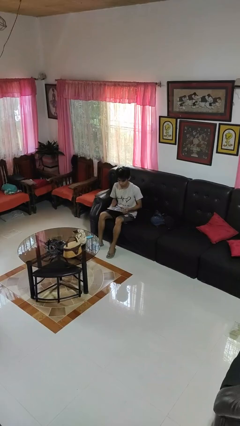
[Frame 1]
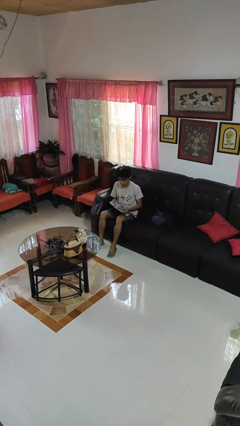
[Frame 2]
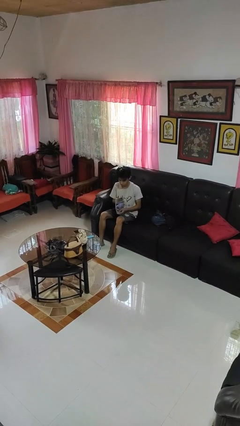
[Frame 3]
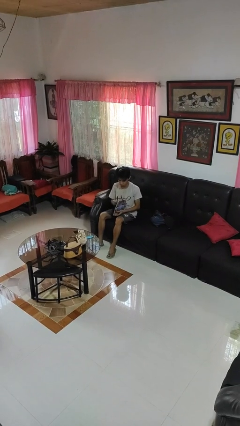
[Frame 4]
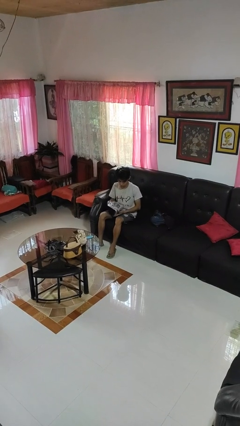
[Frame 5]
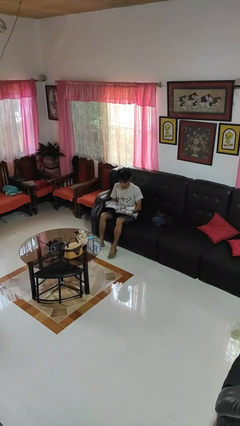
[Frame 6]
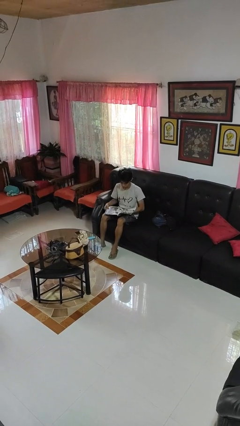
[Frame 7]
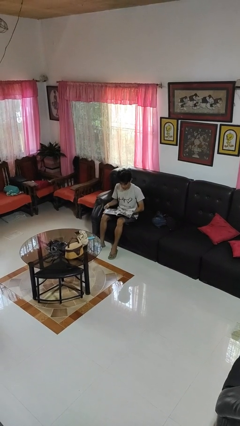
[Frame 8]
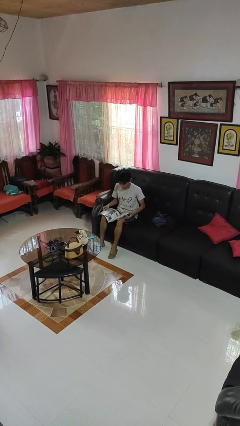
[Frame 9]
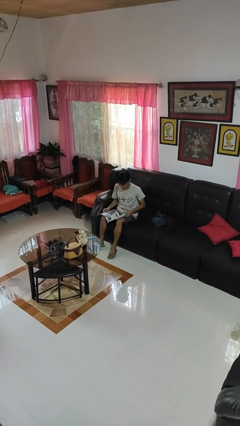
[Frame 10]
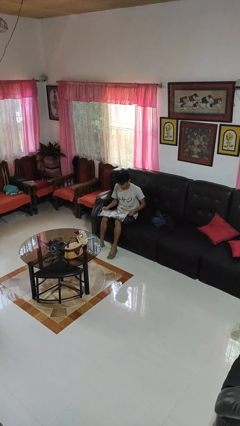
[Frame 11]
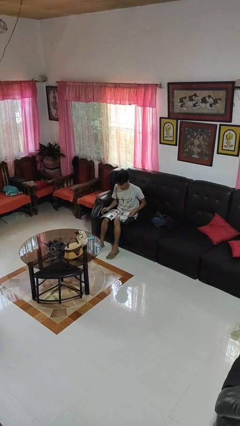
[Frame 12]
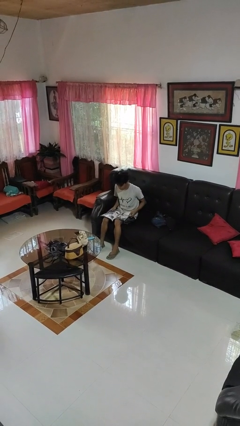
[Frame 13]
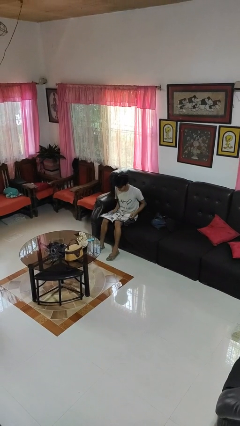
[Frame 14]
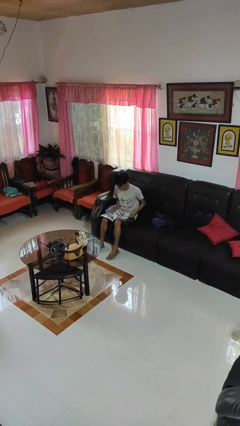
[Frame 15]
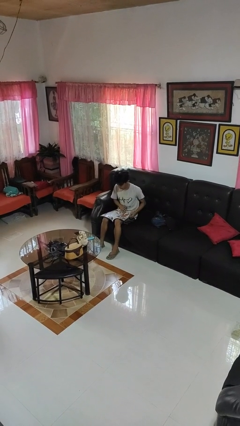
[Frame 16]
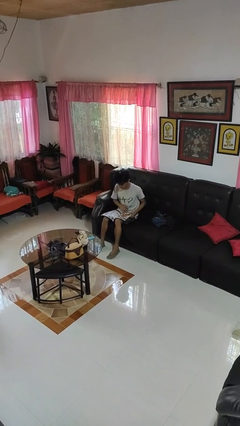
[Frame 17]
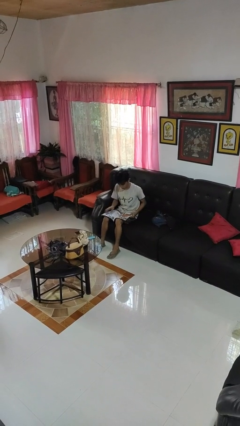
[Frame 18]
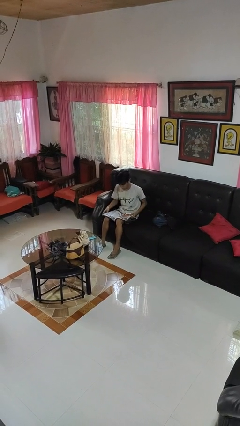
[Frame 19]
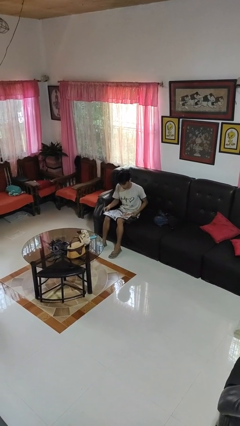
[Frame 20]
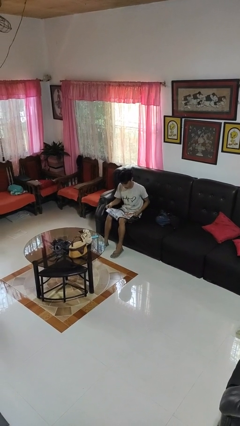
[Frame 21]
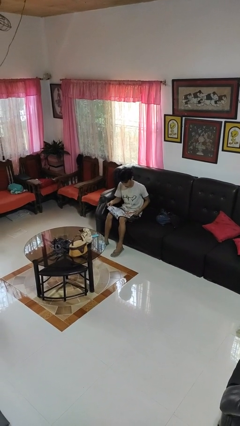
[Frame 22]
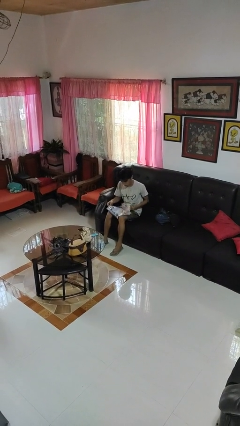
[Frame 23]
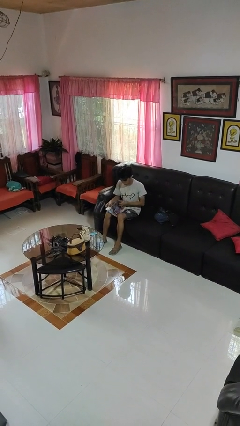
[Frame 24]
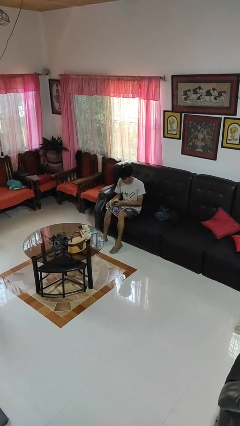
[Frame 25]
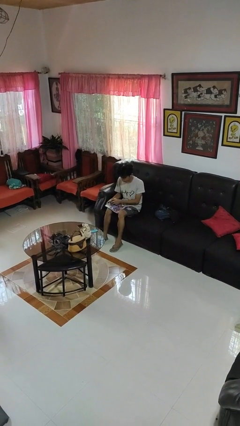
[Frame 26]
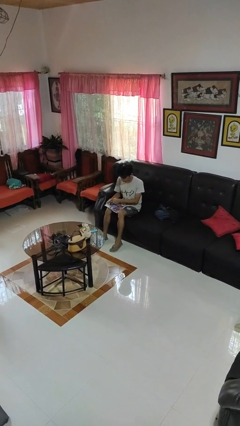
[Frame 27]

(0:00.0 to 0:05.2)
person reads magazine

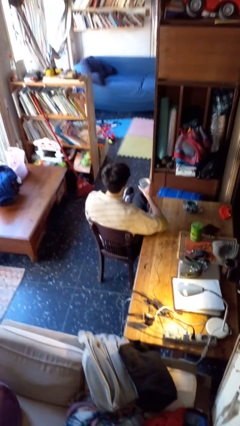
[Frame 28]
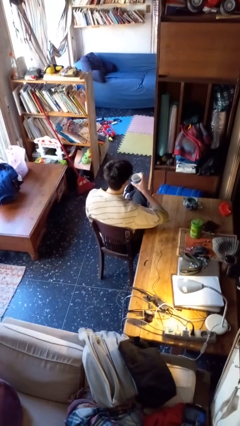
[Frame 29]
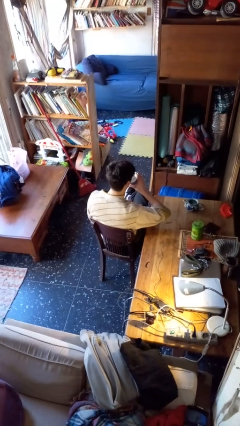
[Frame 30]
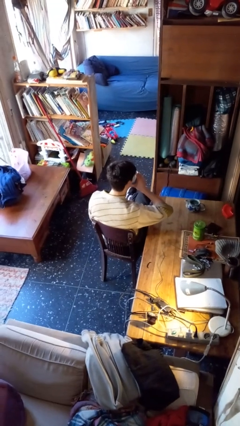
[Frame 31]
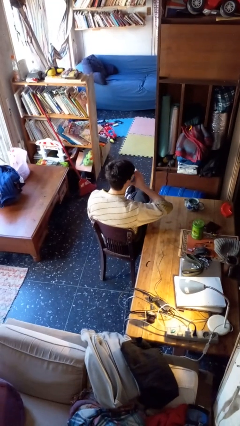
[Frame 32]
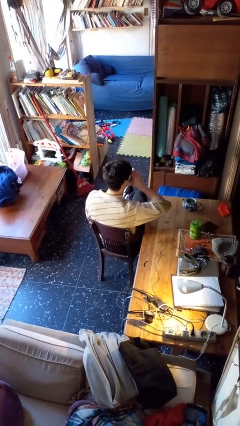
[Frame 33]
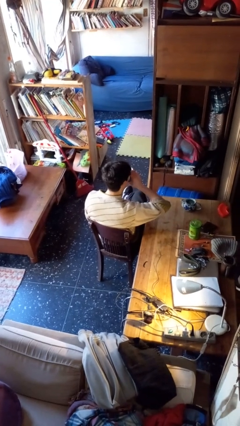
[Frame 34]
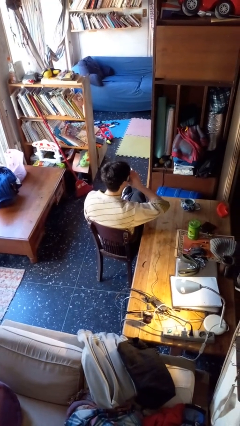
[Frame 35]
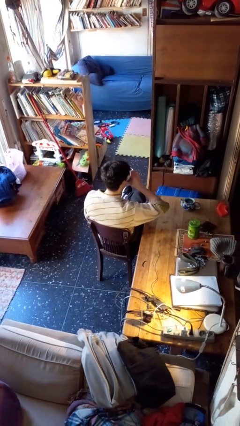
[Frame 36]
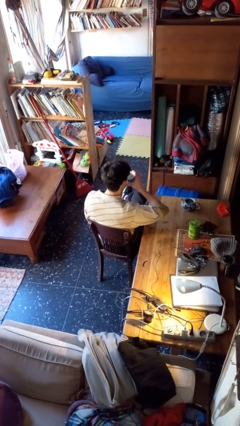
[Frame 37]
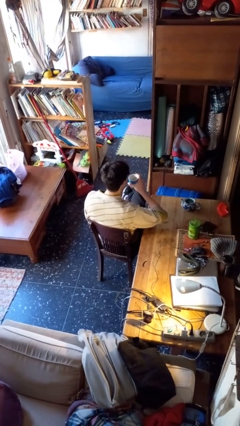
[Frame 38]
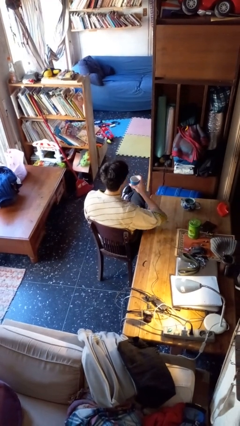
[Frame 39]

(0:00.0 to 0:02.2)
person drinks from mug

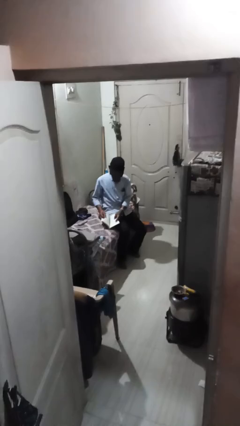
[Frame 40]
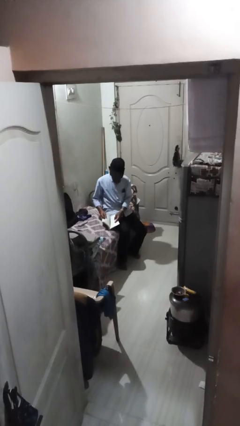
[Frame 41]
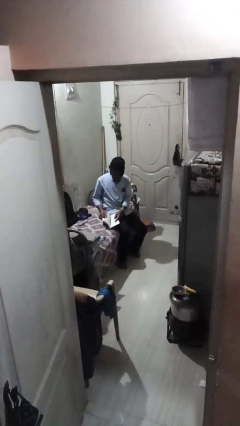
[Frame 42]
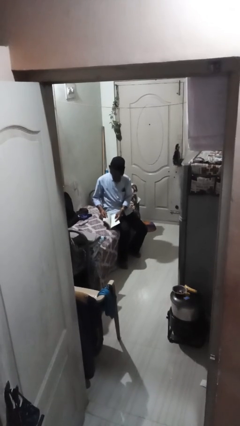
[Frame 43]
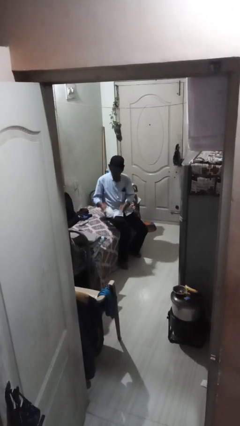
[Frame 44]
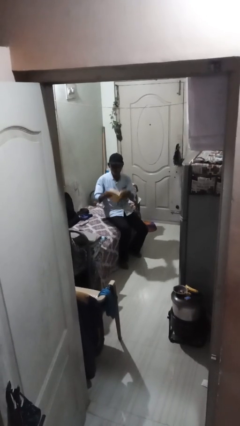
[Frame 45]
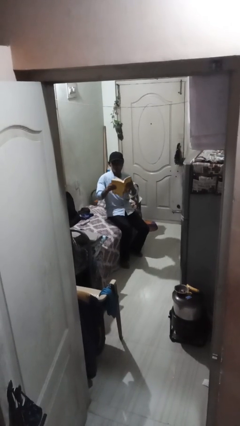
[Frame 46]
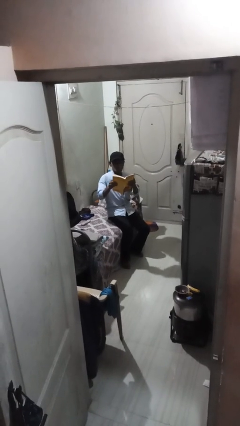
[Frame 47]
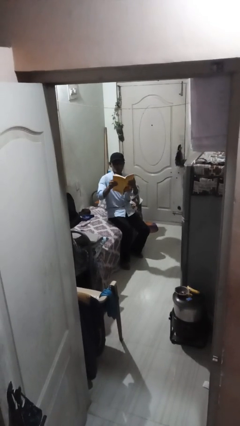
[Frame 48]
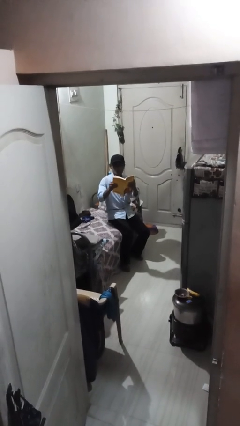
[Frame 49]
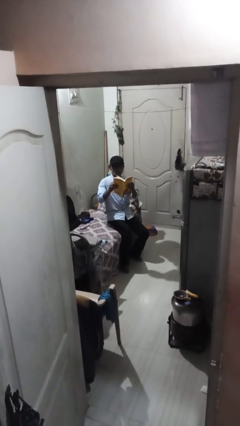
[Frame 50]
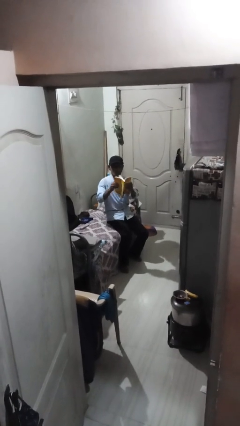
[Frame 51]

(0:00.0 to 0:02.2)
person reads book

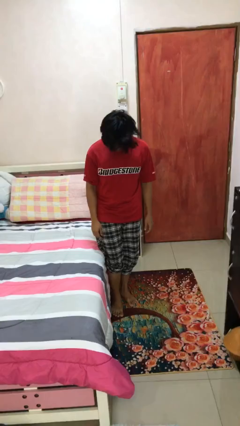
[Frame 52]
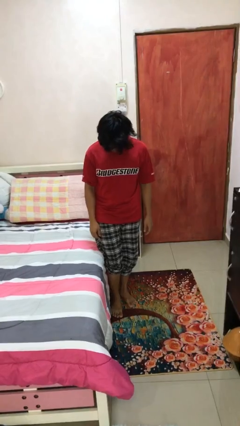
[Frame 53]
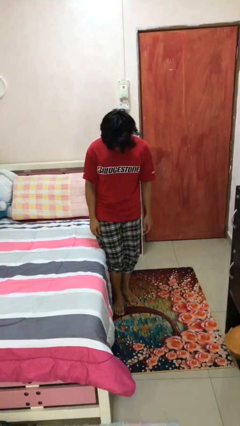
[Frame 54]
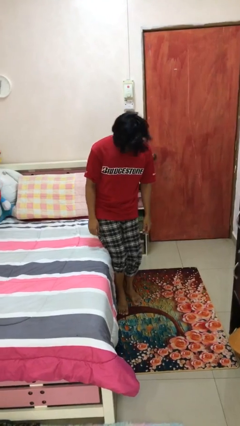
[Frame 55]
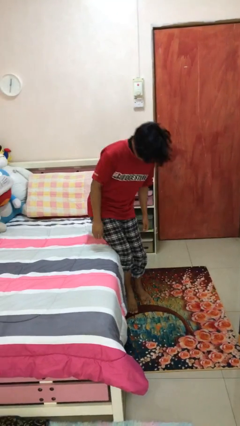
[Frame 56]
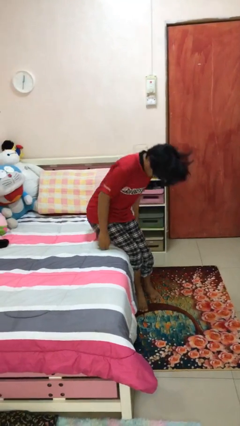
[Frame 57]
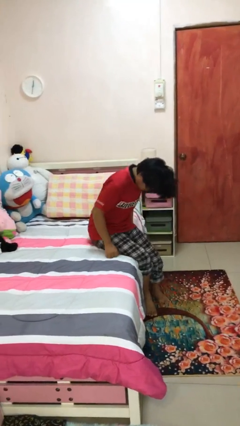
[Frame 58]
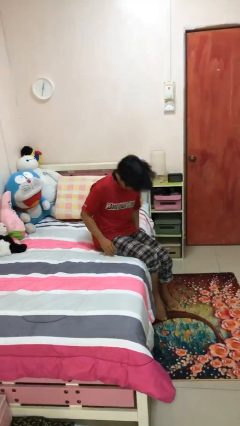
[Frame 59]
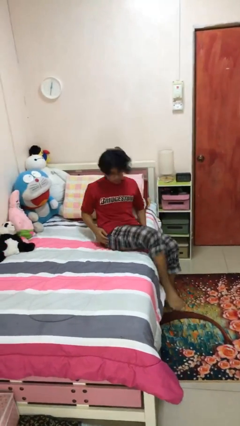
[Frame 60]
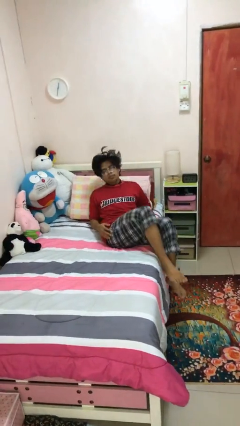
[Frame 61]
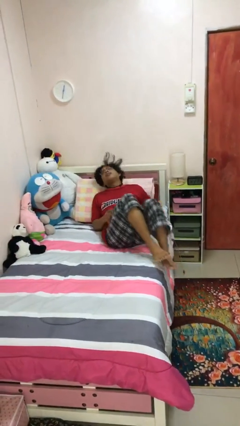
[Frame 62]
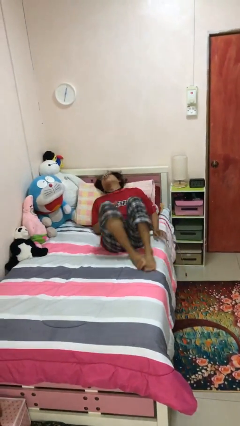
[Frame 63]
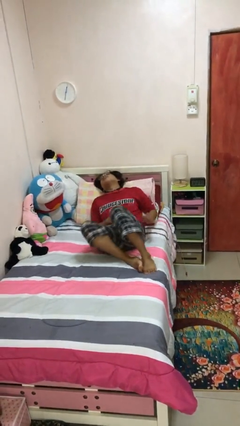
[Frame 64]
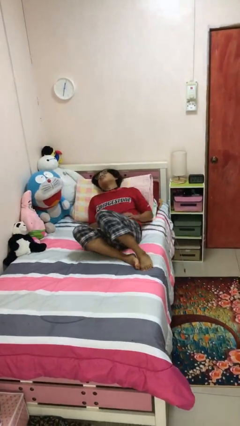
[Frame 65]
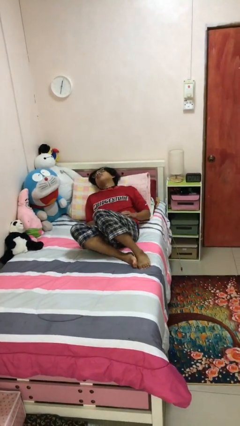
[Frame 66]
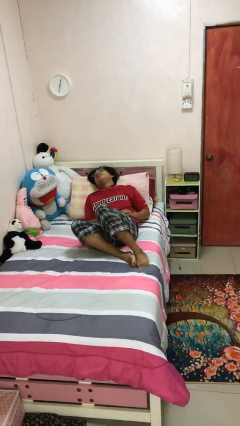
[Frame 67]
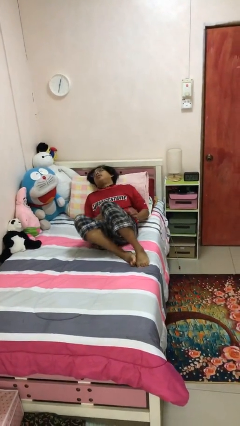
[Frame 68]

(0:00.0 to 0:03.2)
person lies down on bed

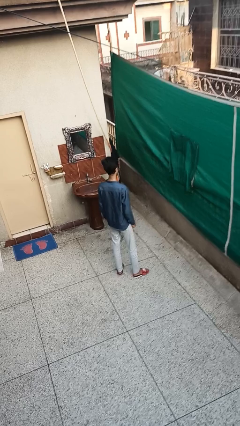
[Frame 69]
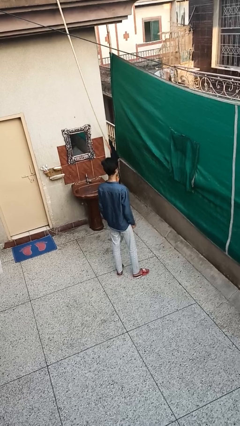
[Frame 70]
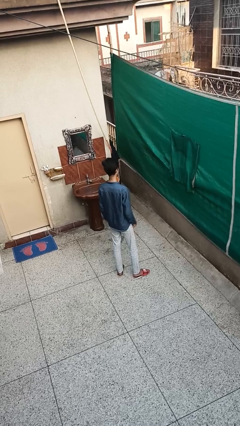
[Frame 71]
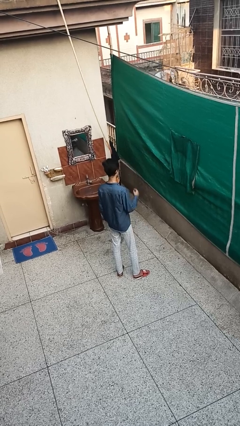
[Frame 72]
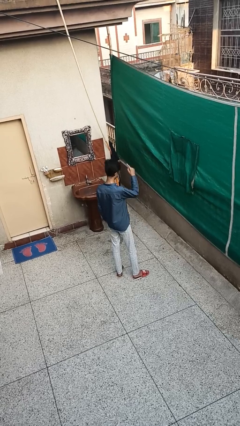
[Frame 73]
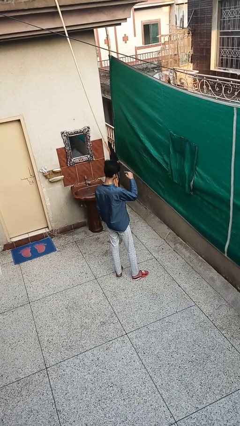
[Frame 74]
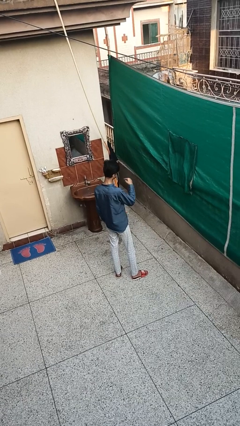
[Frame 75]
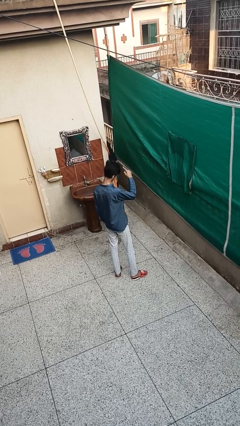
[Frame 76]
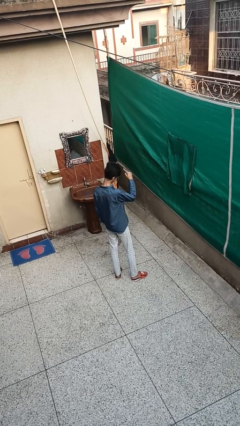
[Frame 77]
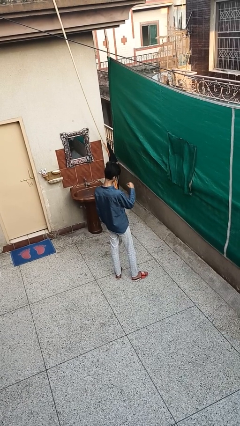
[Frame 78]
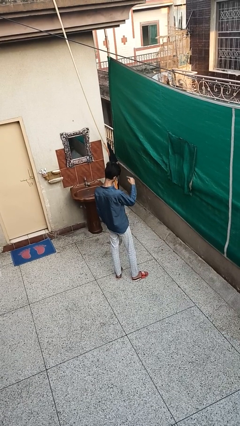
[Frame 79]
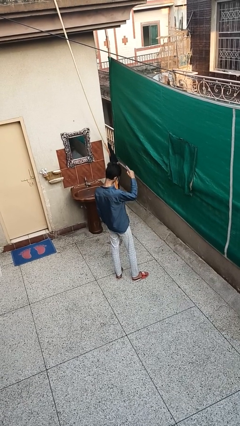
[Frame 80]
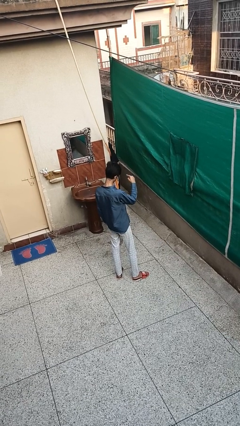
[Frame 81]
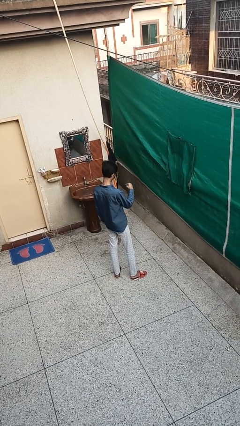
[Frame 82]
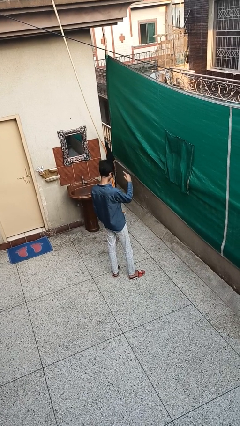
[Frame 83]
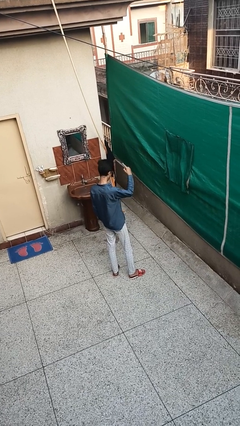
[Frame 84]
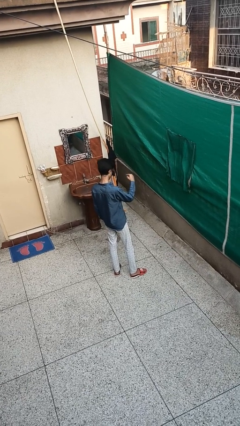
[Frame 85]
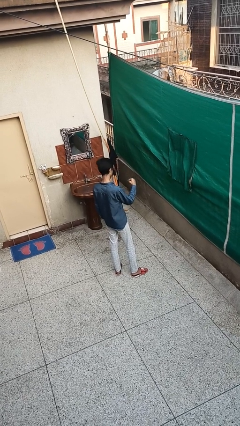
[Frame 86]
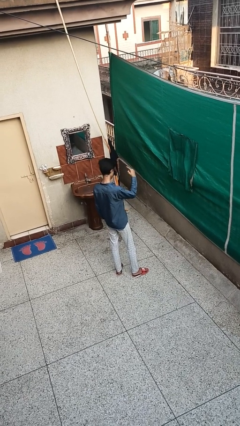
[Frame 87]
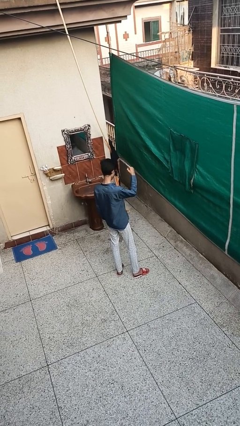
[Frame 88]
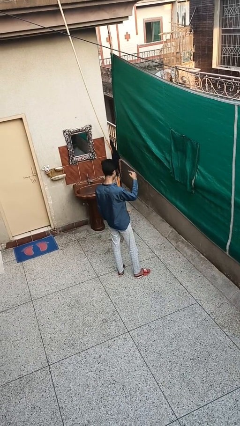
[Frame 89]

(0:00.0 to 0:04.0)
person gestures swipe down

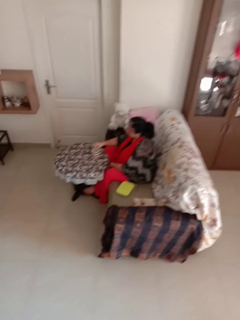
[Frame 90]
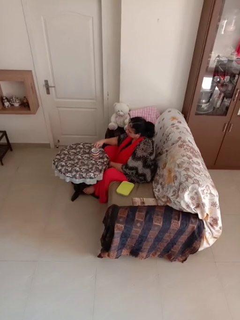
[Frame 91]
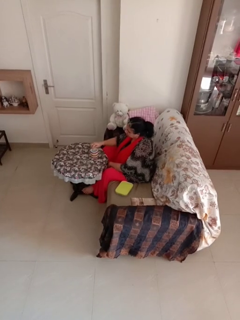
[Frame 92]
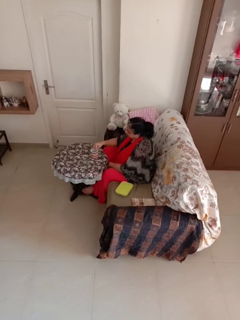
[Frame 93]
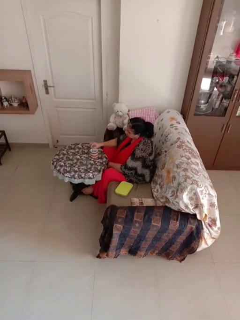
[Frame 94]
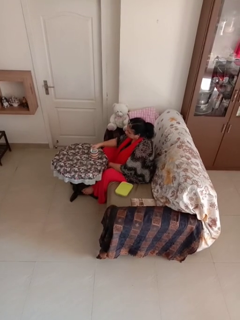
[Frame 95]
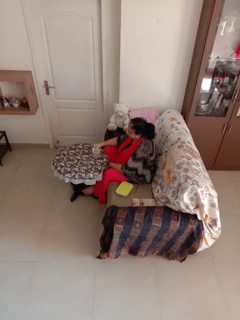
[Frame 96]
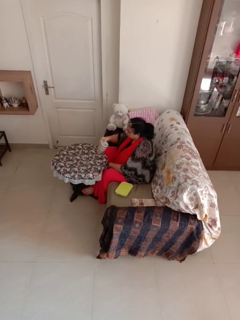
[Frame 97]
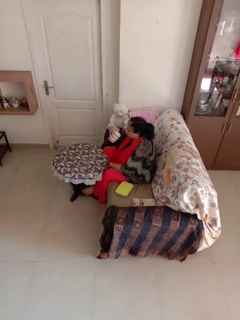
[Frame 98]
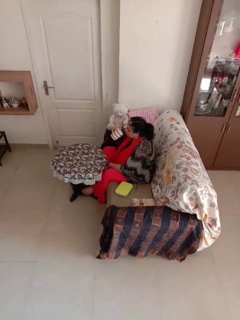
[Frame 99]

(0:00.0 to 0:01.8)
person stirs mug
